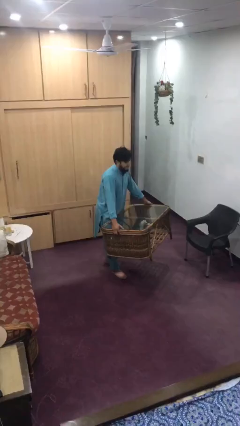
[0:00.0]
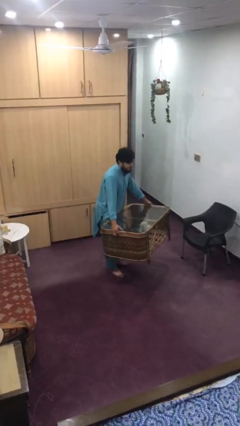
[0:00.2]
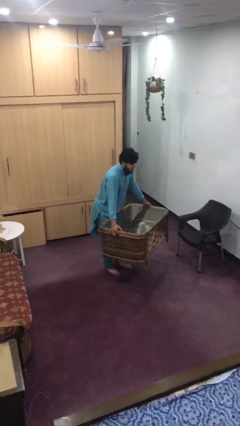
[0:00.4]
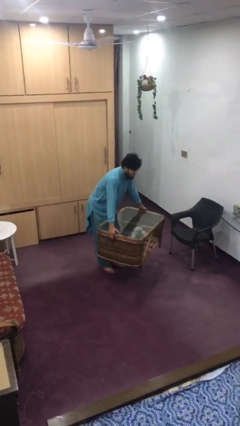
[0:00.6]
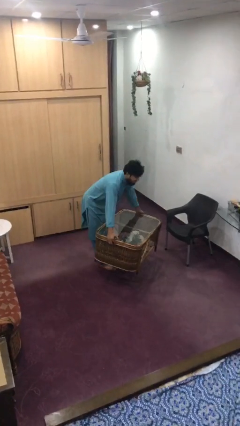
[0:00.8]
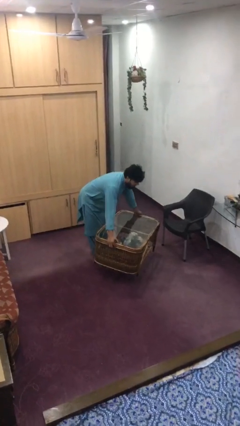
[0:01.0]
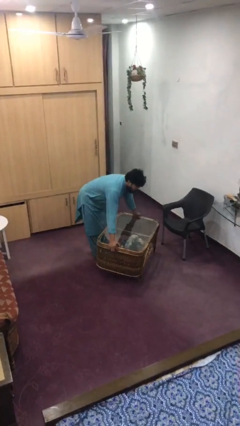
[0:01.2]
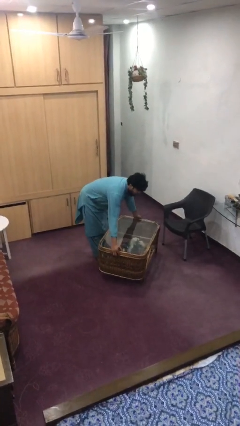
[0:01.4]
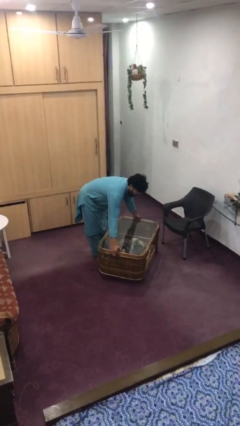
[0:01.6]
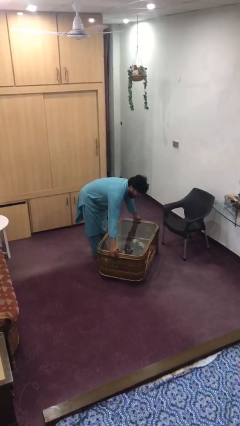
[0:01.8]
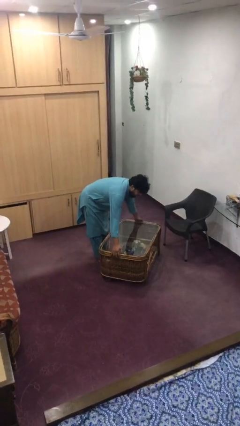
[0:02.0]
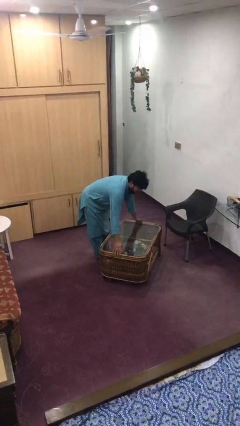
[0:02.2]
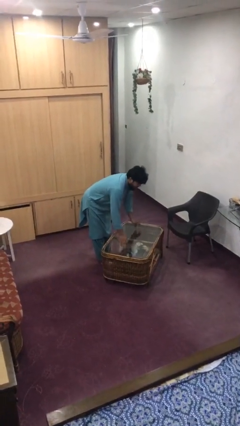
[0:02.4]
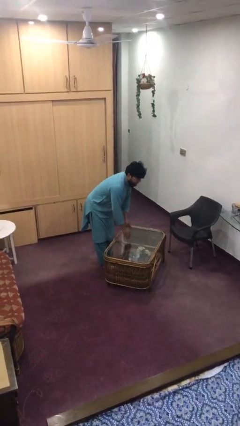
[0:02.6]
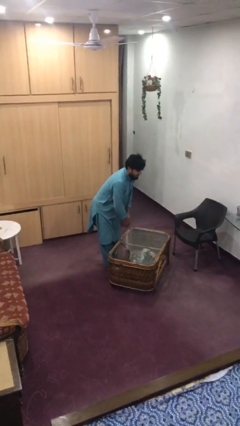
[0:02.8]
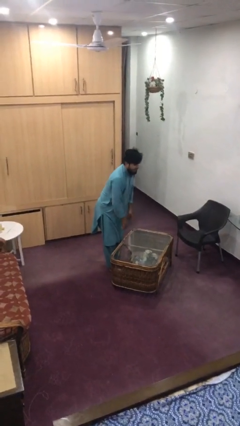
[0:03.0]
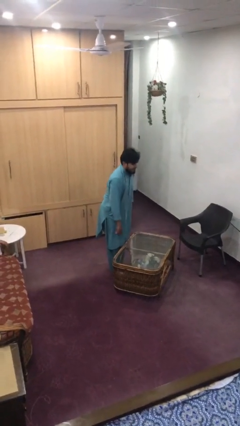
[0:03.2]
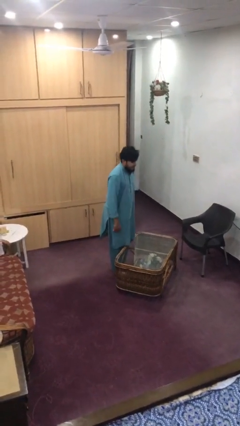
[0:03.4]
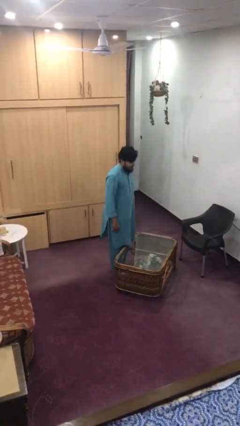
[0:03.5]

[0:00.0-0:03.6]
person puts down object on floor

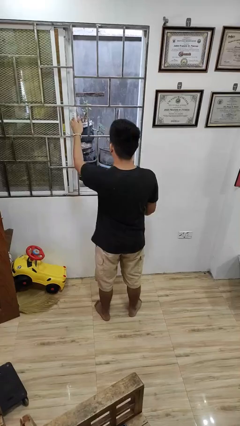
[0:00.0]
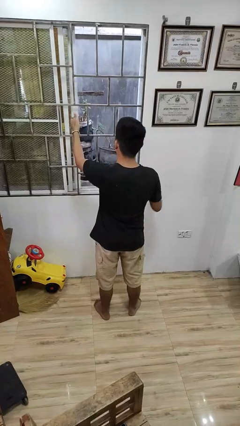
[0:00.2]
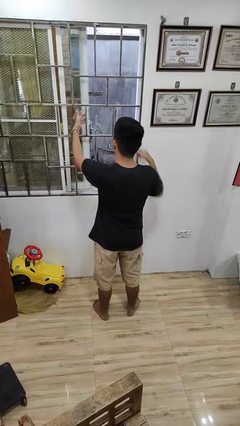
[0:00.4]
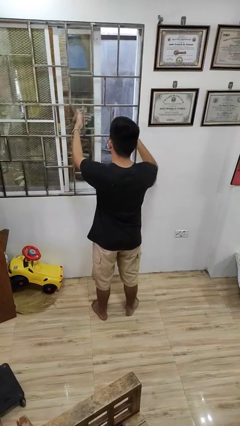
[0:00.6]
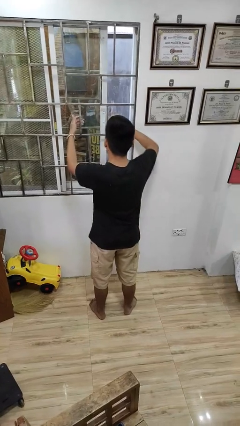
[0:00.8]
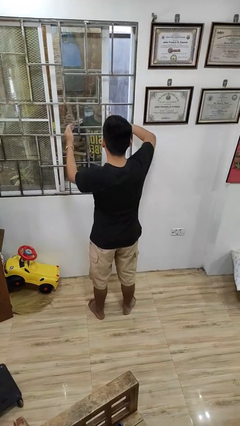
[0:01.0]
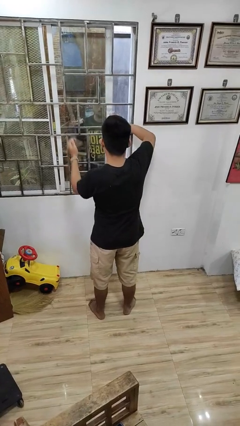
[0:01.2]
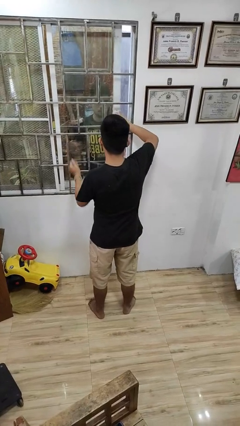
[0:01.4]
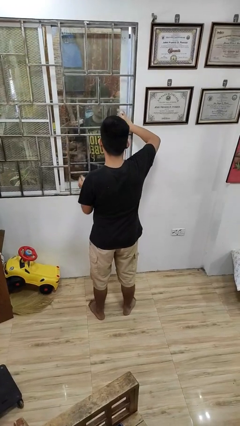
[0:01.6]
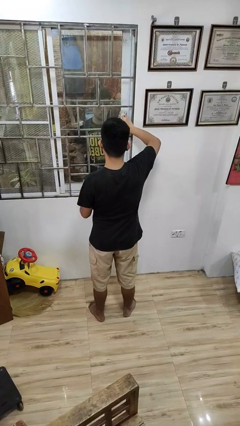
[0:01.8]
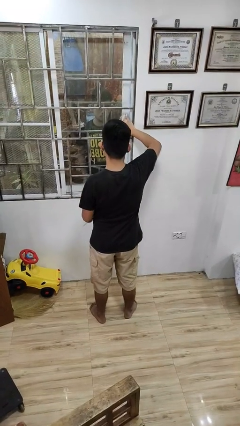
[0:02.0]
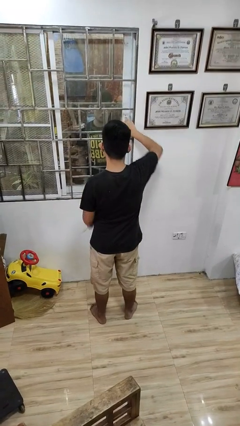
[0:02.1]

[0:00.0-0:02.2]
person closes home window

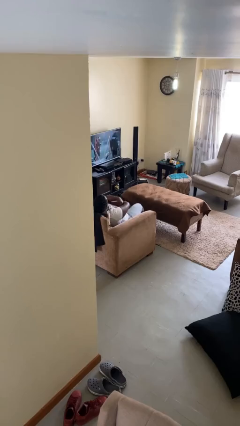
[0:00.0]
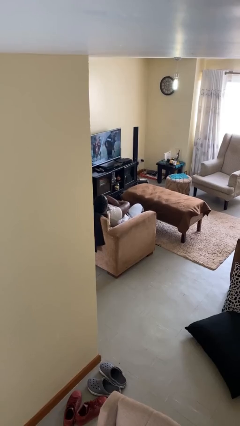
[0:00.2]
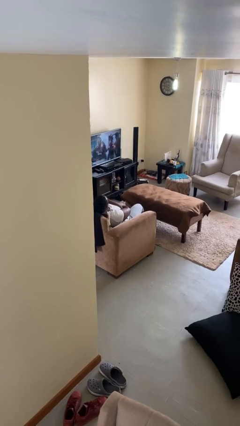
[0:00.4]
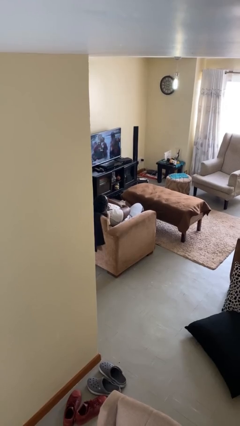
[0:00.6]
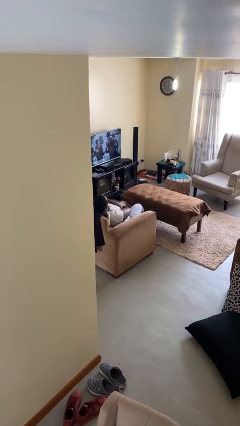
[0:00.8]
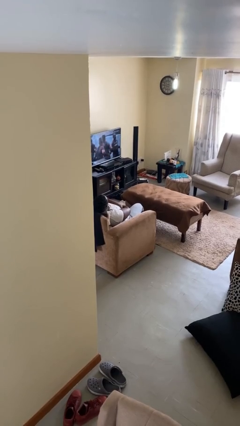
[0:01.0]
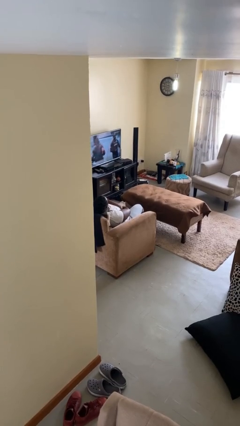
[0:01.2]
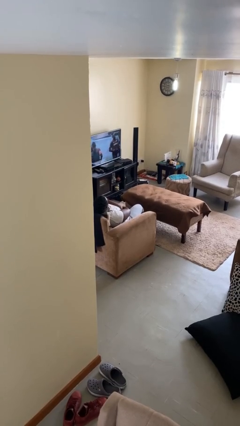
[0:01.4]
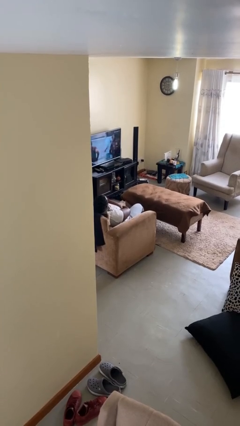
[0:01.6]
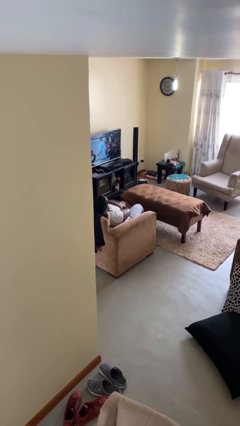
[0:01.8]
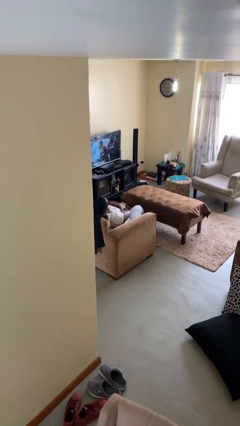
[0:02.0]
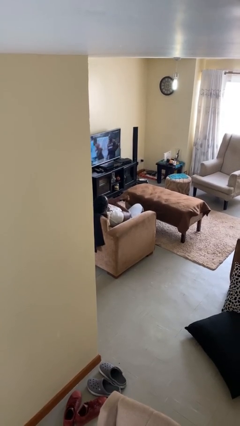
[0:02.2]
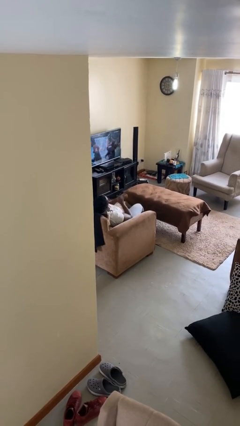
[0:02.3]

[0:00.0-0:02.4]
person crosses arms

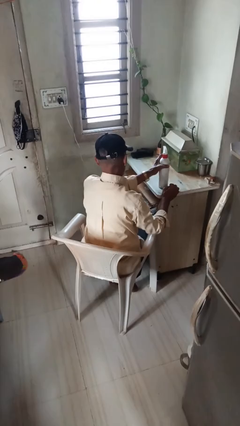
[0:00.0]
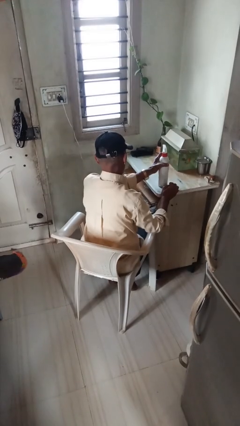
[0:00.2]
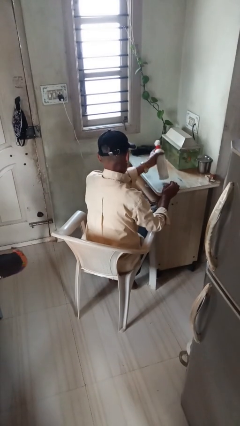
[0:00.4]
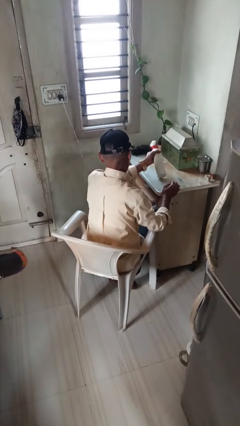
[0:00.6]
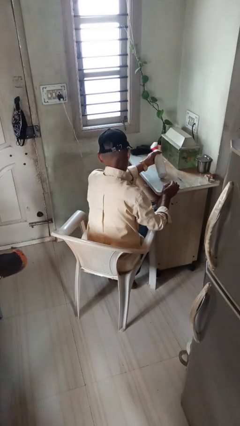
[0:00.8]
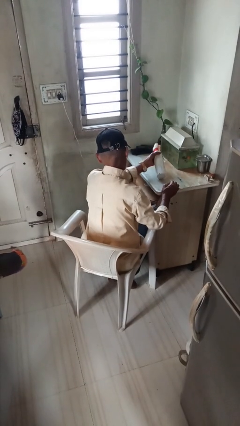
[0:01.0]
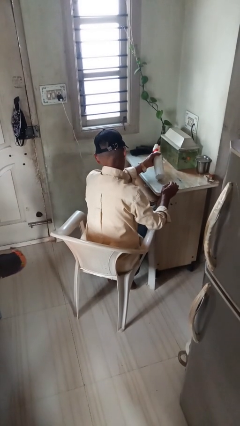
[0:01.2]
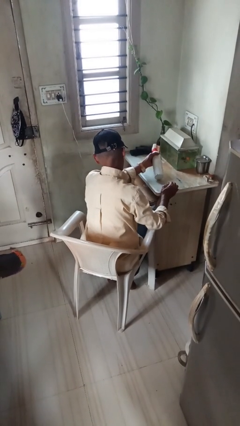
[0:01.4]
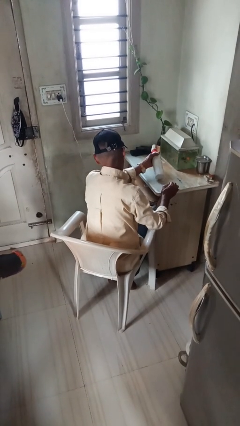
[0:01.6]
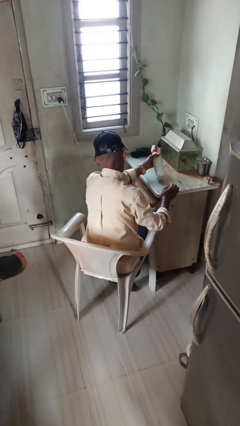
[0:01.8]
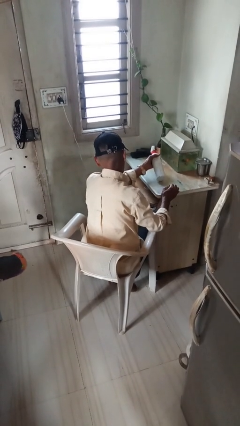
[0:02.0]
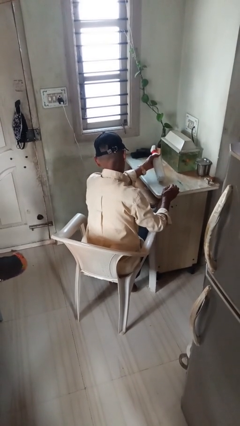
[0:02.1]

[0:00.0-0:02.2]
person sprays from bottle

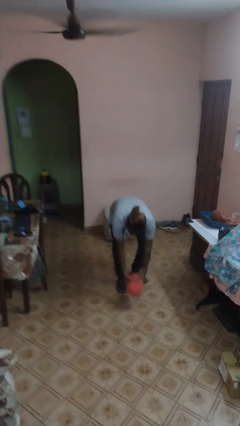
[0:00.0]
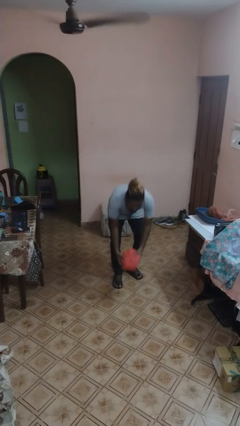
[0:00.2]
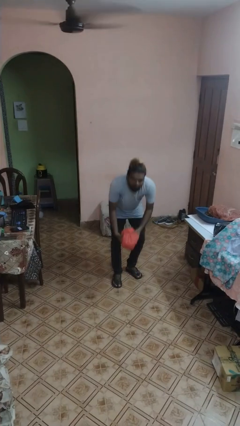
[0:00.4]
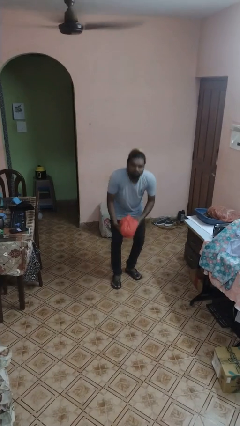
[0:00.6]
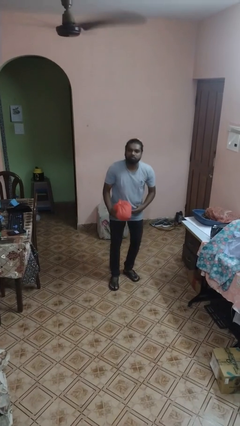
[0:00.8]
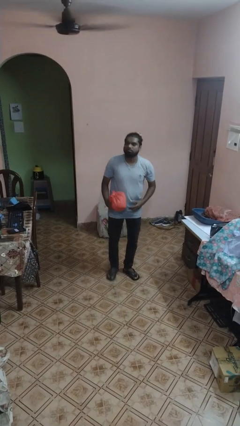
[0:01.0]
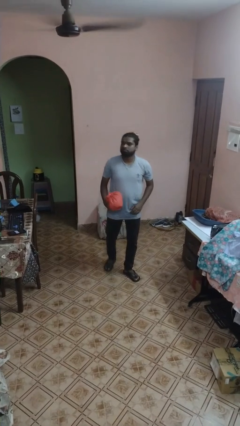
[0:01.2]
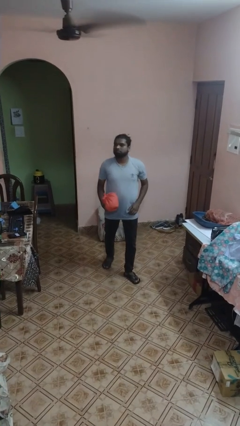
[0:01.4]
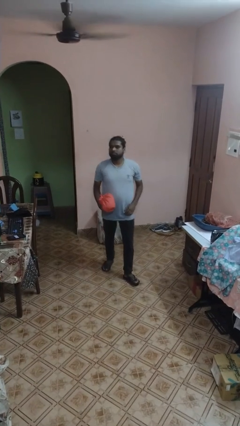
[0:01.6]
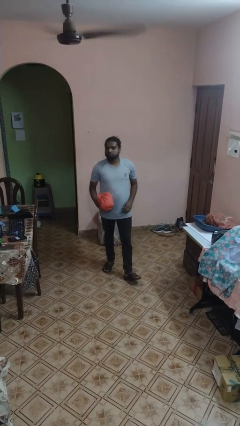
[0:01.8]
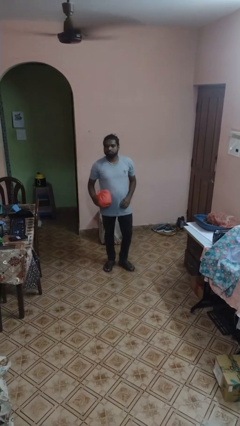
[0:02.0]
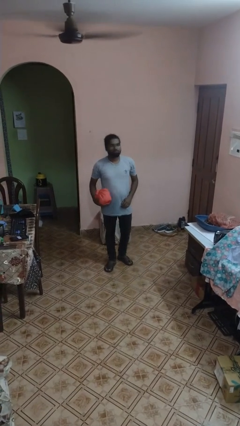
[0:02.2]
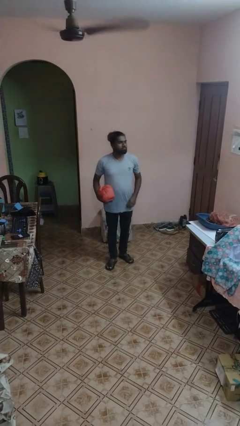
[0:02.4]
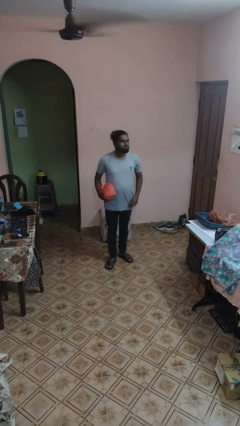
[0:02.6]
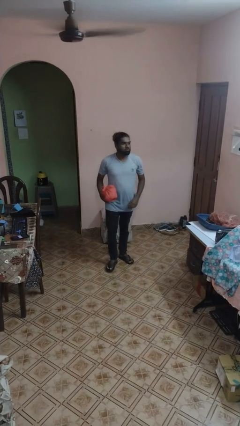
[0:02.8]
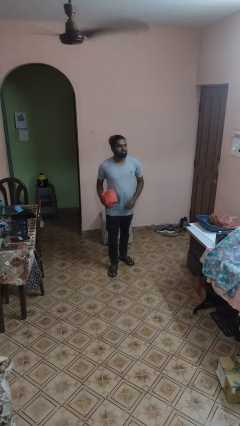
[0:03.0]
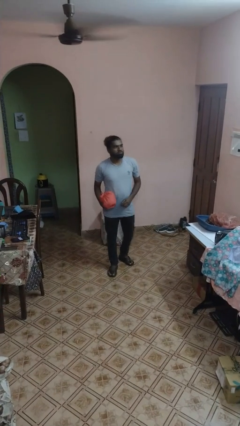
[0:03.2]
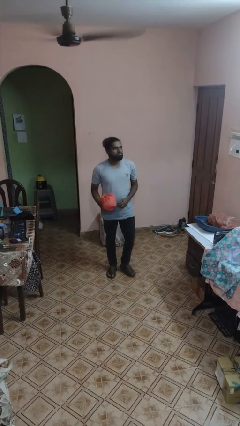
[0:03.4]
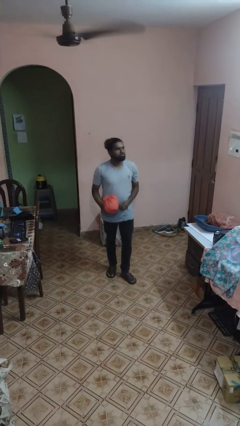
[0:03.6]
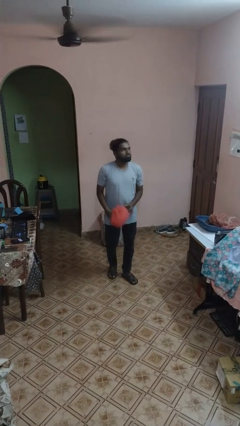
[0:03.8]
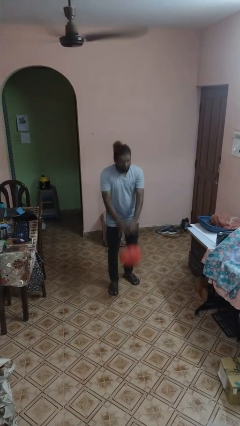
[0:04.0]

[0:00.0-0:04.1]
person picks up object from floor

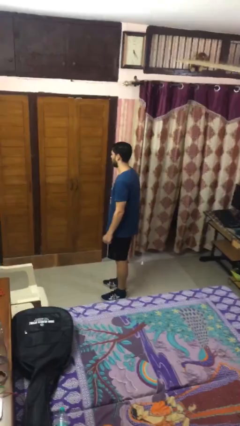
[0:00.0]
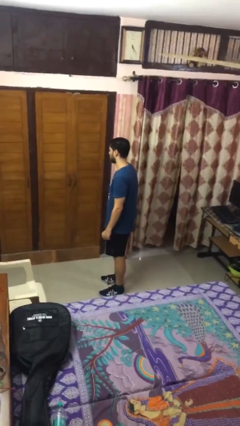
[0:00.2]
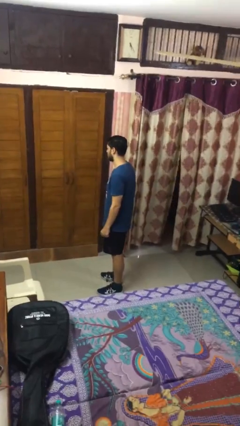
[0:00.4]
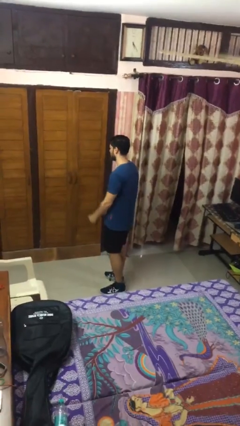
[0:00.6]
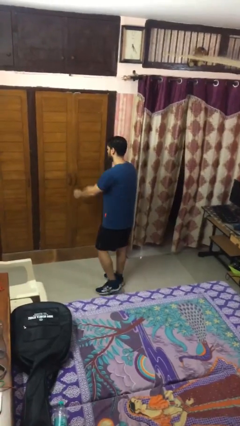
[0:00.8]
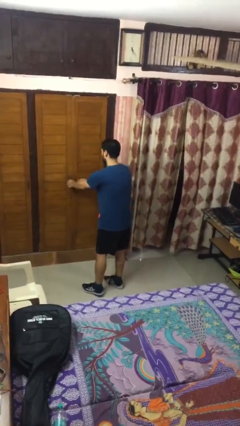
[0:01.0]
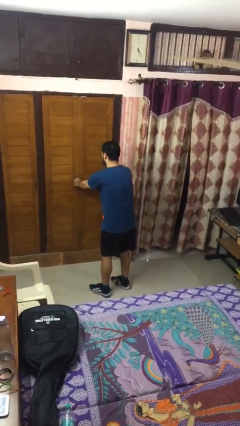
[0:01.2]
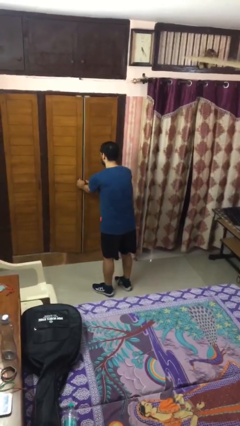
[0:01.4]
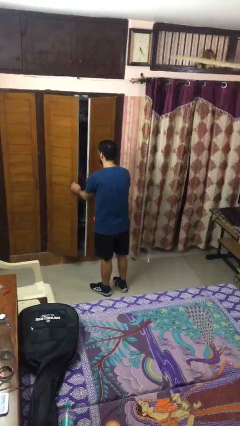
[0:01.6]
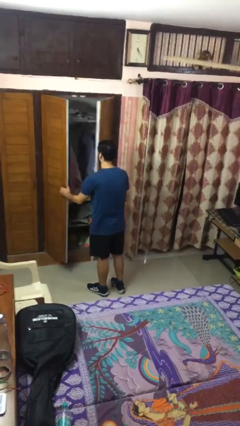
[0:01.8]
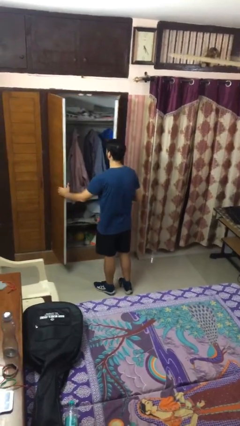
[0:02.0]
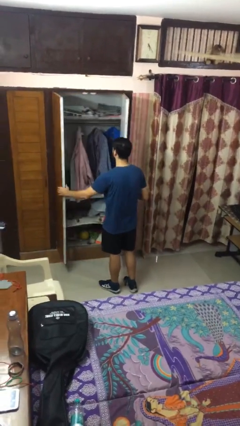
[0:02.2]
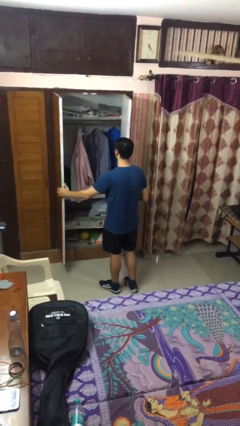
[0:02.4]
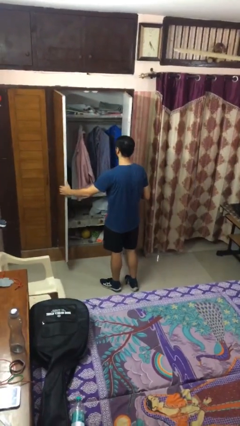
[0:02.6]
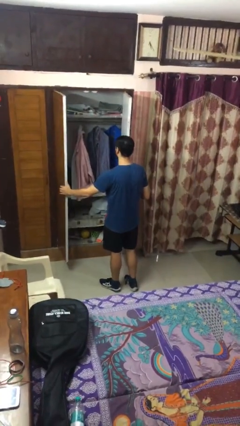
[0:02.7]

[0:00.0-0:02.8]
person opens closet door
